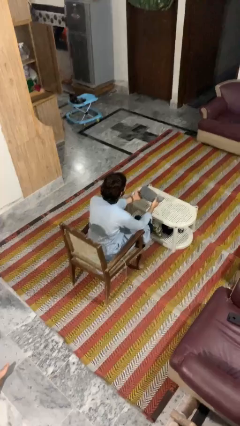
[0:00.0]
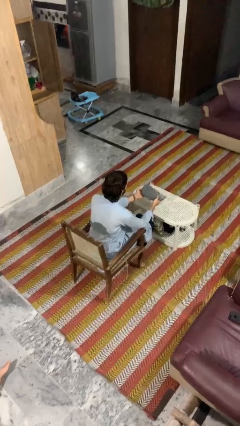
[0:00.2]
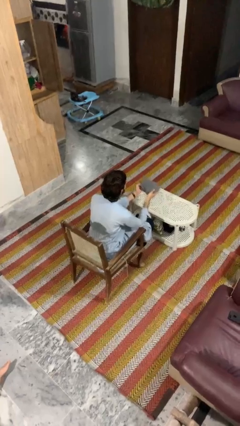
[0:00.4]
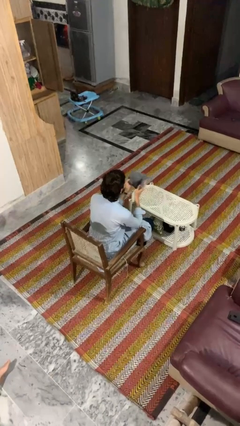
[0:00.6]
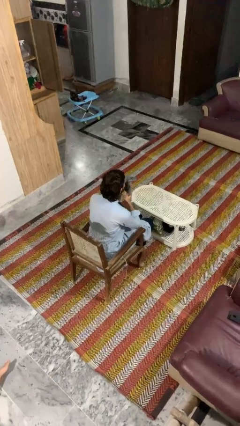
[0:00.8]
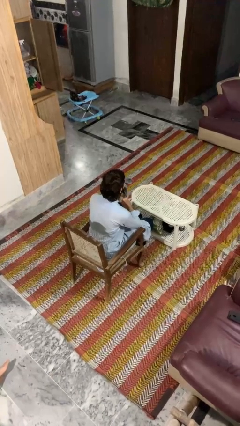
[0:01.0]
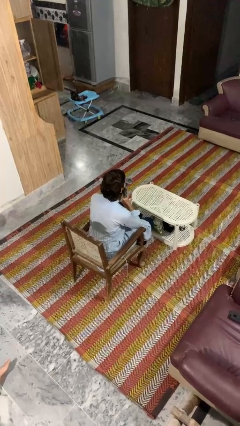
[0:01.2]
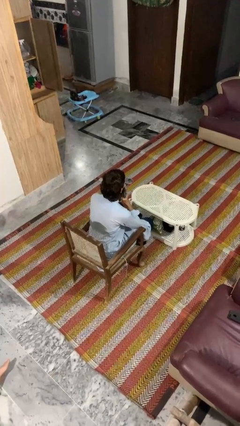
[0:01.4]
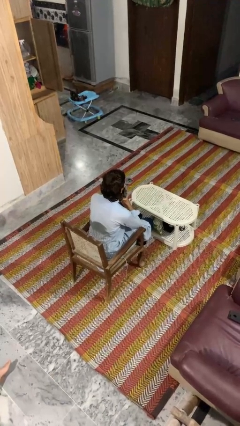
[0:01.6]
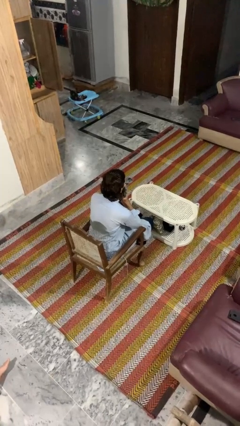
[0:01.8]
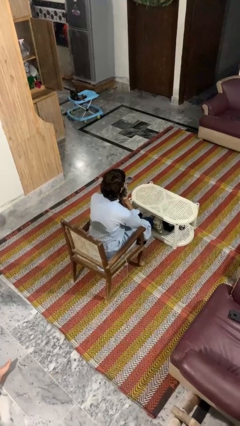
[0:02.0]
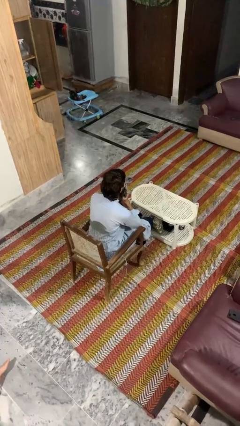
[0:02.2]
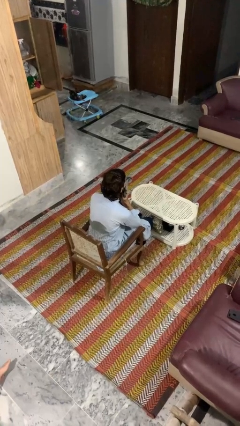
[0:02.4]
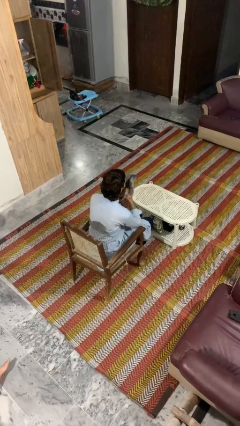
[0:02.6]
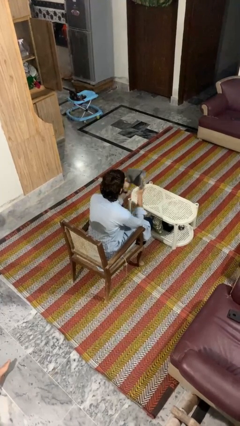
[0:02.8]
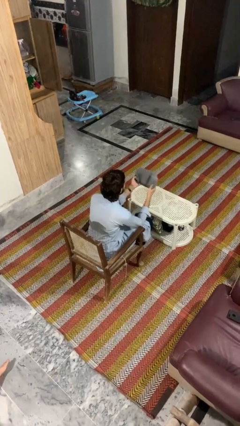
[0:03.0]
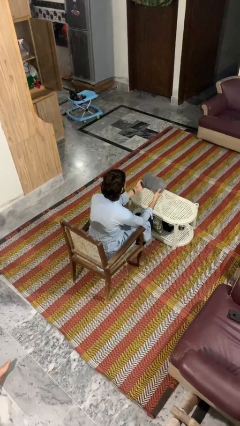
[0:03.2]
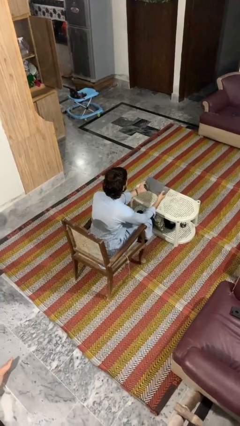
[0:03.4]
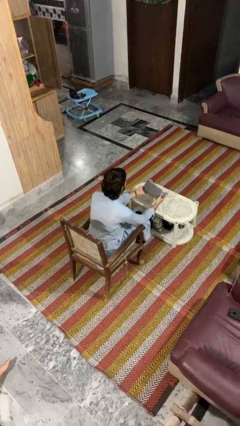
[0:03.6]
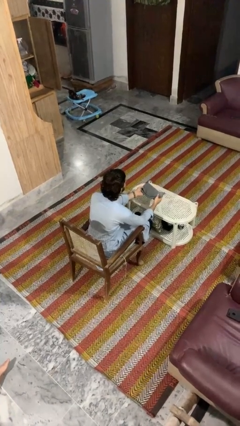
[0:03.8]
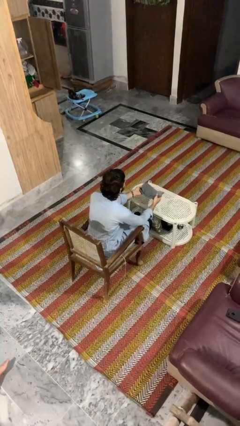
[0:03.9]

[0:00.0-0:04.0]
person wipes mouth with napkin

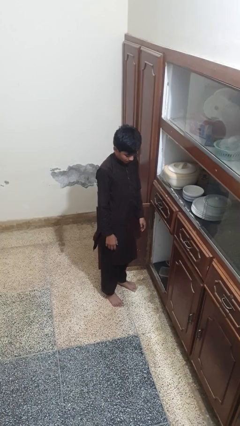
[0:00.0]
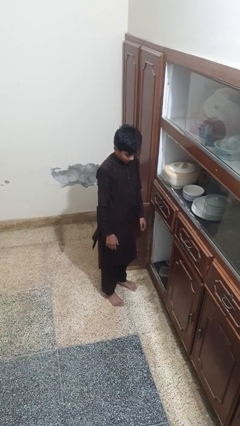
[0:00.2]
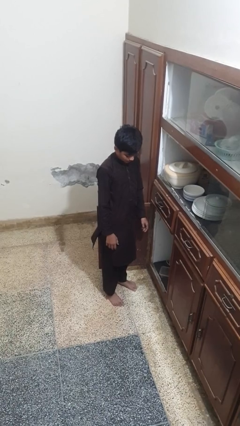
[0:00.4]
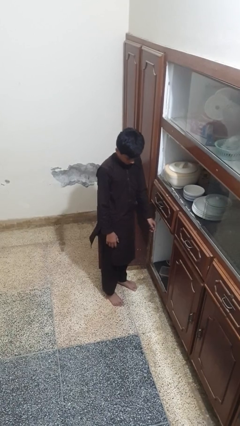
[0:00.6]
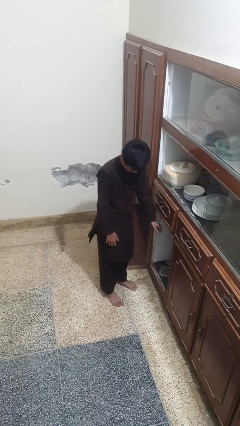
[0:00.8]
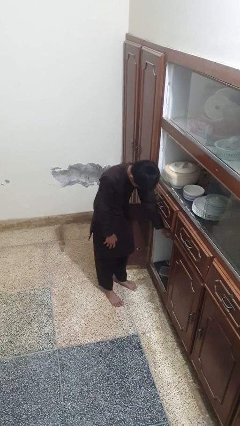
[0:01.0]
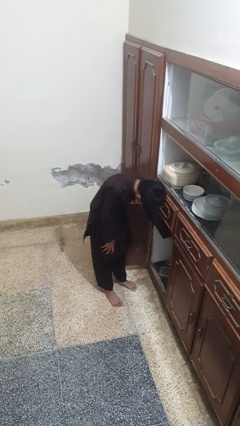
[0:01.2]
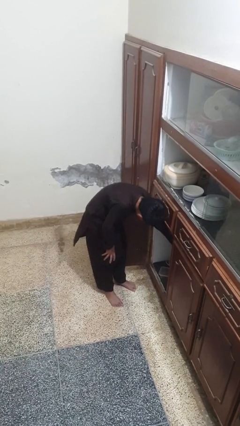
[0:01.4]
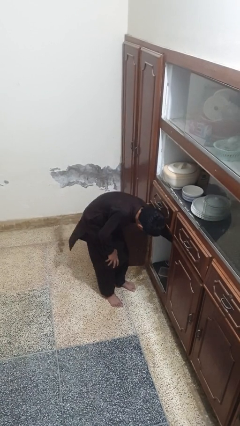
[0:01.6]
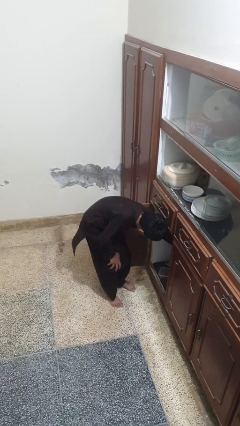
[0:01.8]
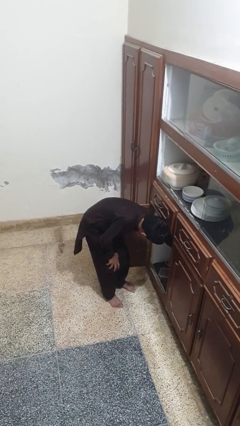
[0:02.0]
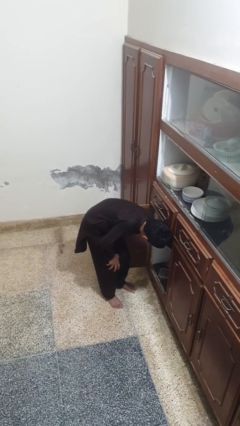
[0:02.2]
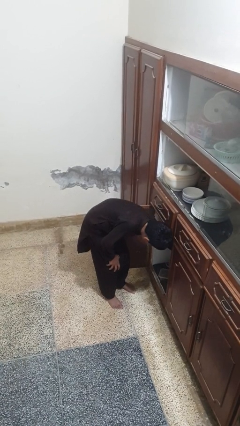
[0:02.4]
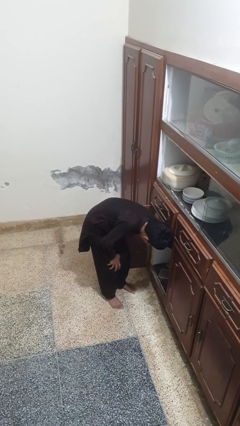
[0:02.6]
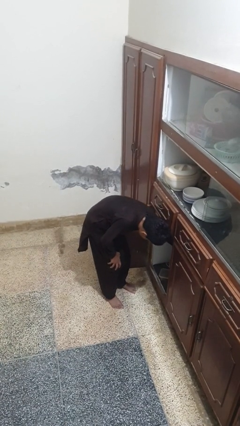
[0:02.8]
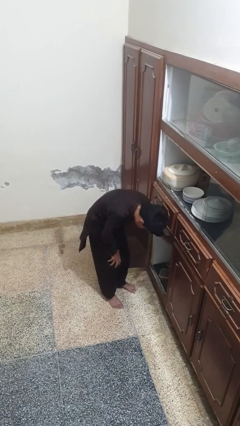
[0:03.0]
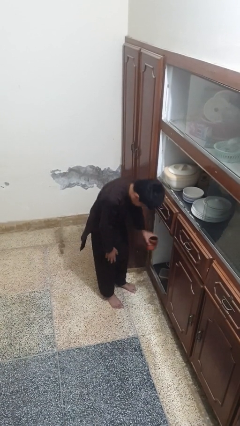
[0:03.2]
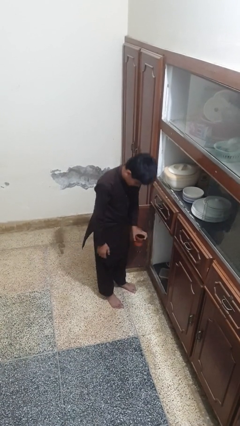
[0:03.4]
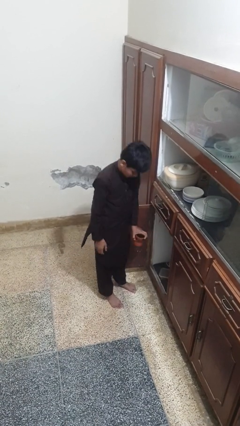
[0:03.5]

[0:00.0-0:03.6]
person takes object from cabinet

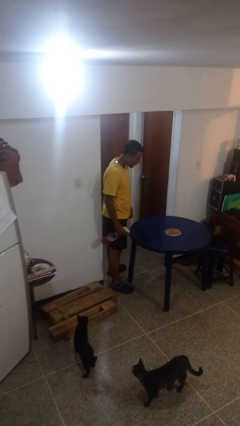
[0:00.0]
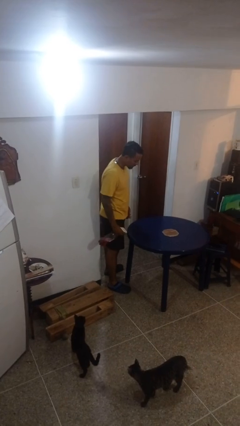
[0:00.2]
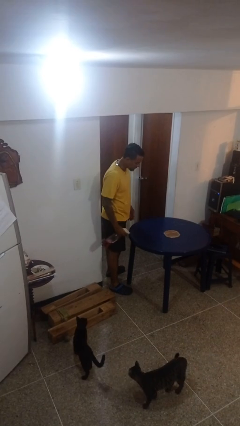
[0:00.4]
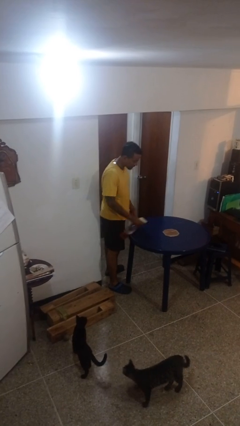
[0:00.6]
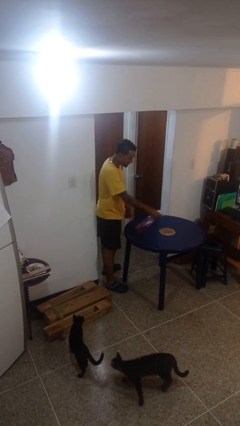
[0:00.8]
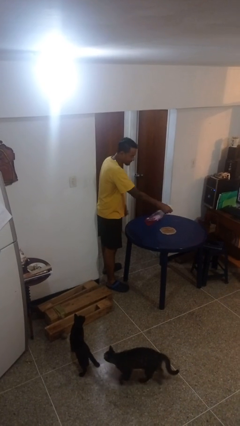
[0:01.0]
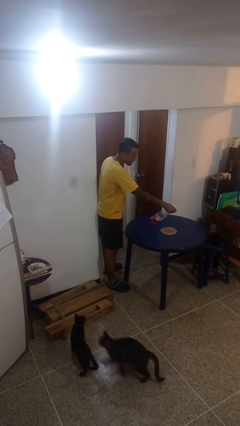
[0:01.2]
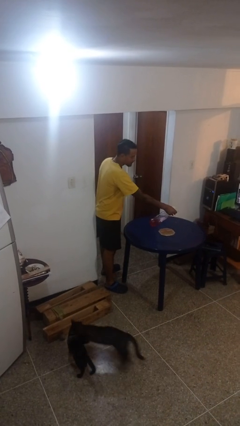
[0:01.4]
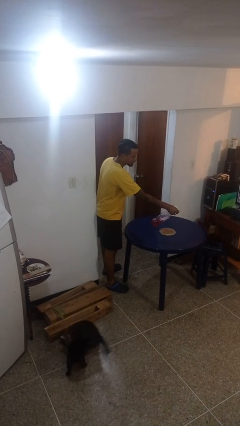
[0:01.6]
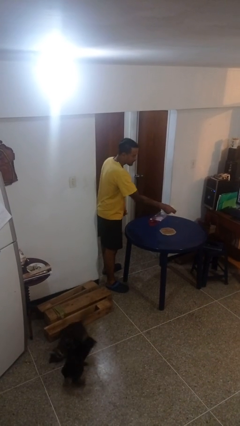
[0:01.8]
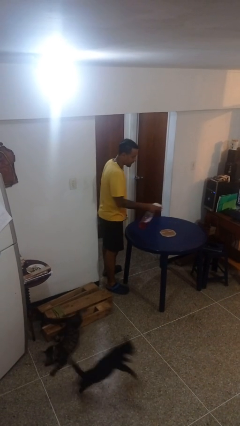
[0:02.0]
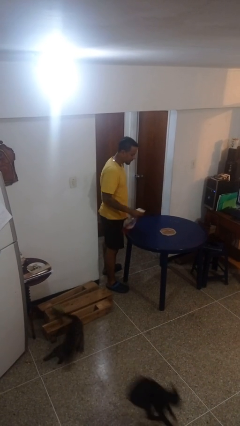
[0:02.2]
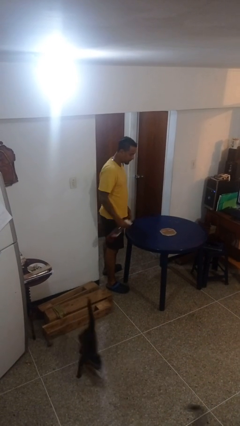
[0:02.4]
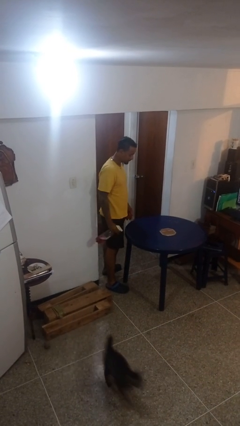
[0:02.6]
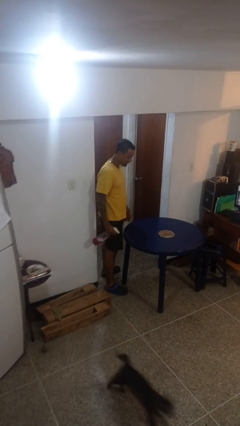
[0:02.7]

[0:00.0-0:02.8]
person sprays from bottle

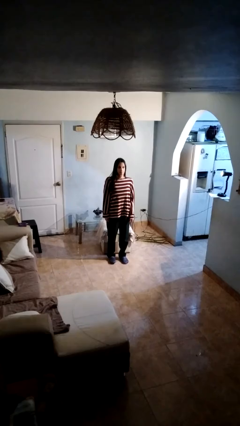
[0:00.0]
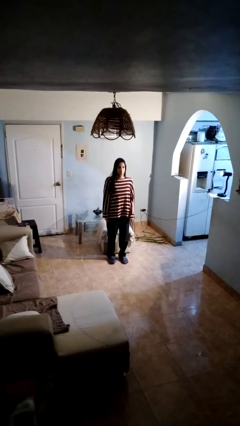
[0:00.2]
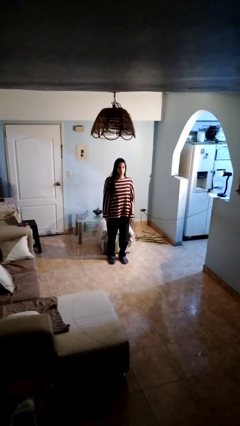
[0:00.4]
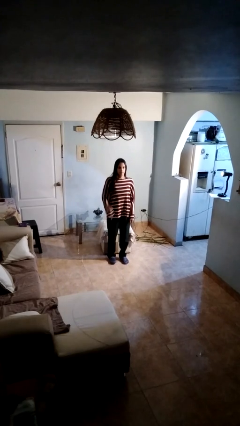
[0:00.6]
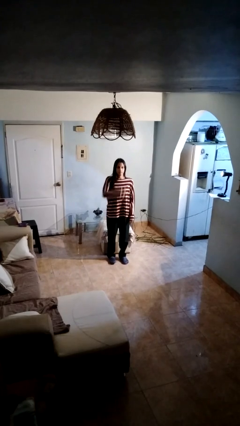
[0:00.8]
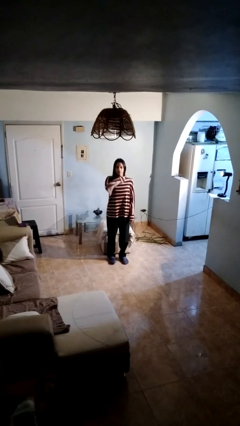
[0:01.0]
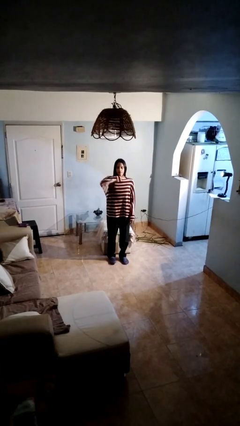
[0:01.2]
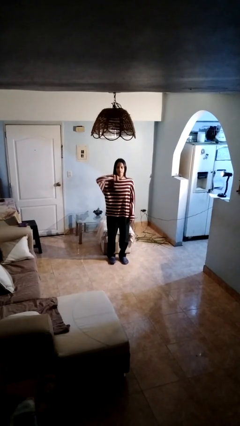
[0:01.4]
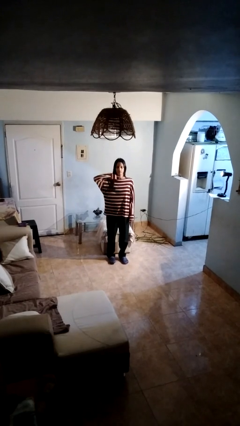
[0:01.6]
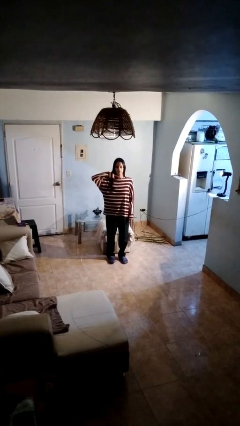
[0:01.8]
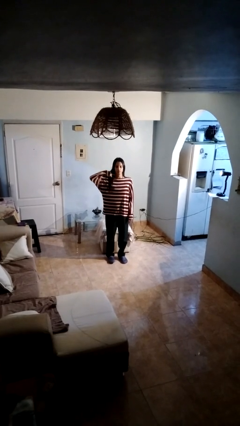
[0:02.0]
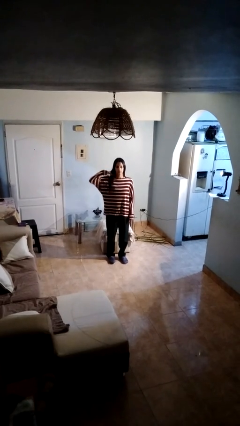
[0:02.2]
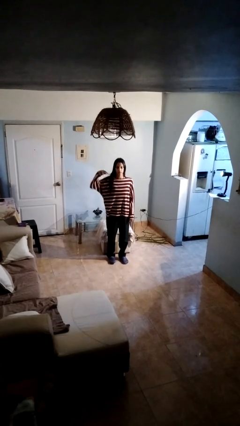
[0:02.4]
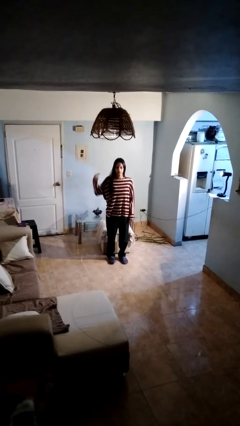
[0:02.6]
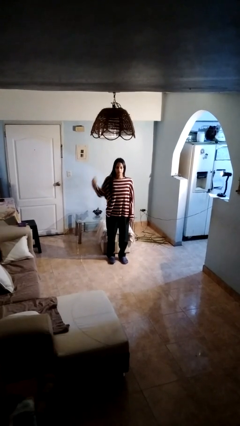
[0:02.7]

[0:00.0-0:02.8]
person gestures cut

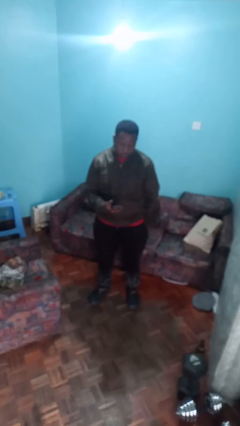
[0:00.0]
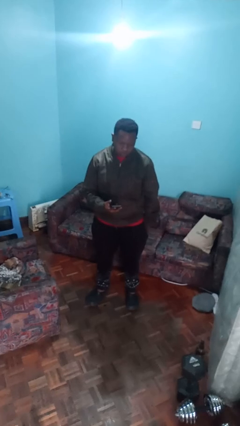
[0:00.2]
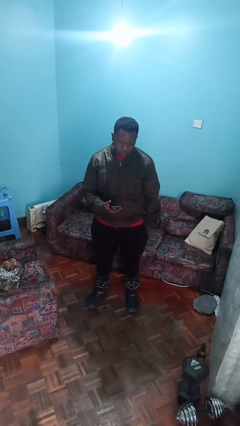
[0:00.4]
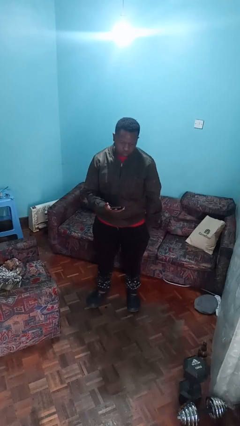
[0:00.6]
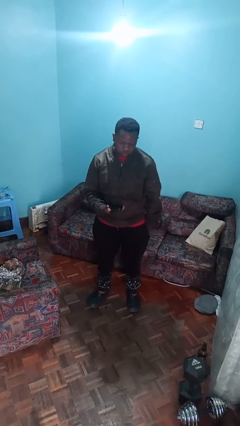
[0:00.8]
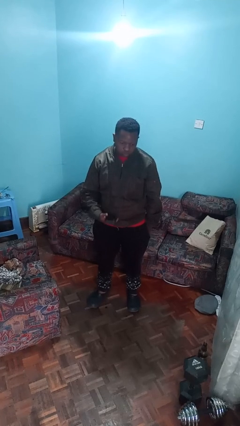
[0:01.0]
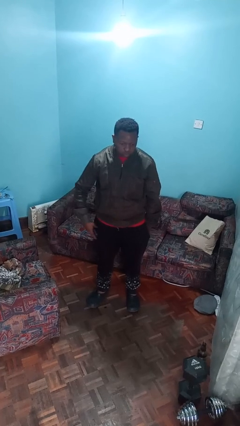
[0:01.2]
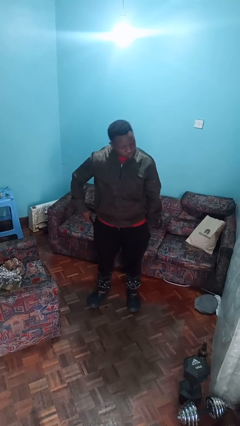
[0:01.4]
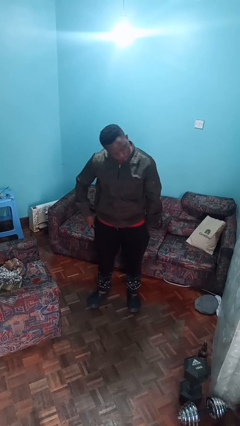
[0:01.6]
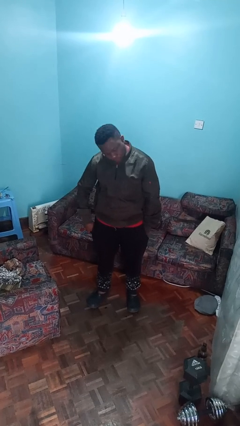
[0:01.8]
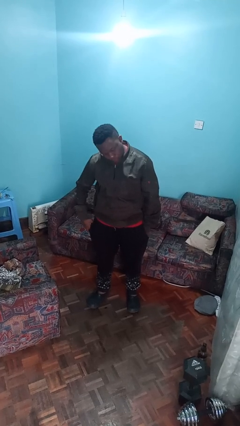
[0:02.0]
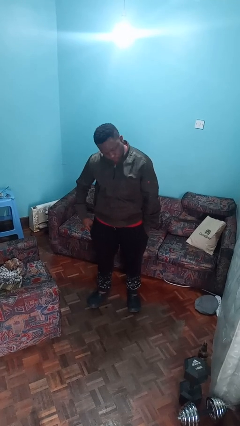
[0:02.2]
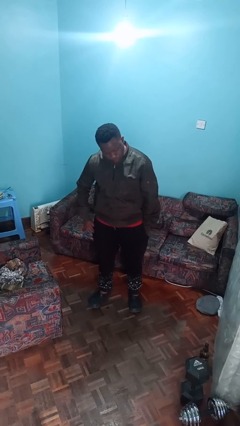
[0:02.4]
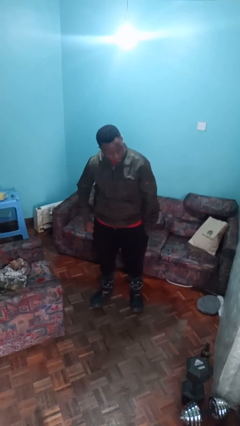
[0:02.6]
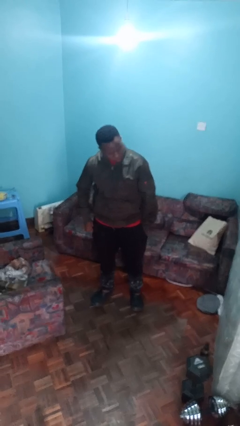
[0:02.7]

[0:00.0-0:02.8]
person puts phone into pocket

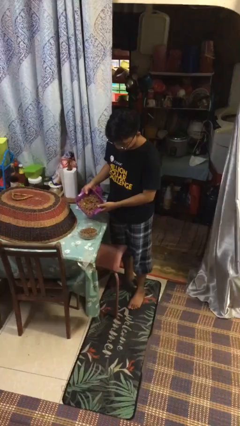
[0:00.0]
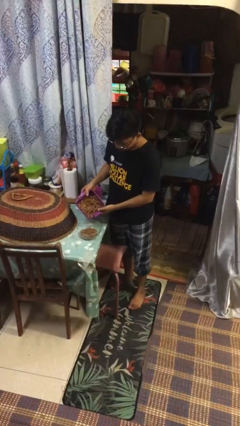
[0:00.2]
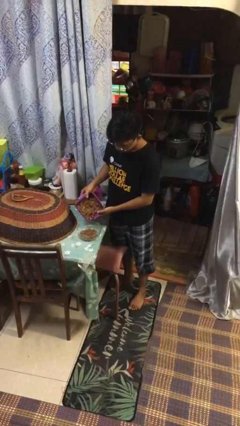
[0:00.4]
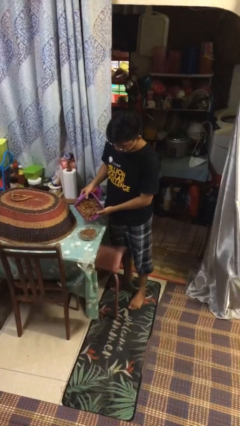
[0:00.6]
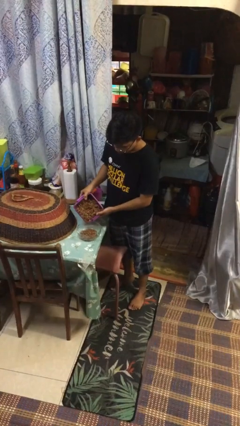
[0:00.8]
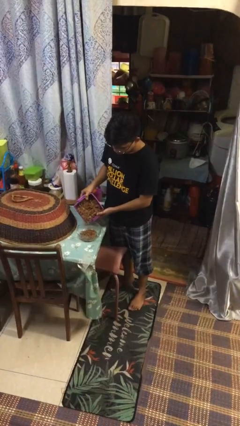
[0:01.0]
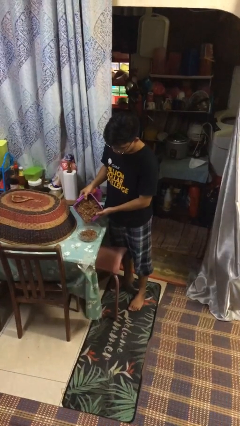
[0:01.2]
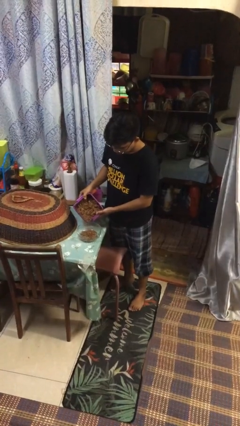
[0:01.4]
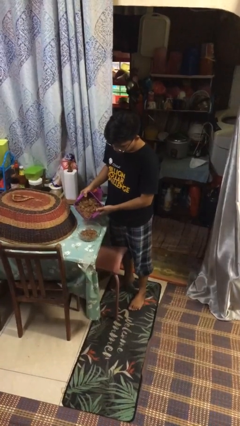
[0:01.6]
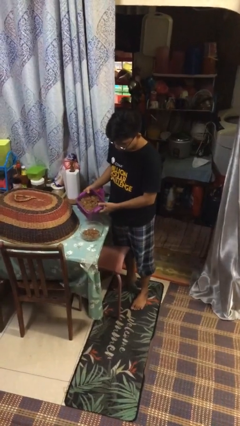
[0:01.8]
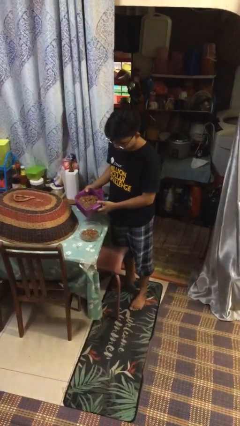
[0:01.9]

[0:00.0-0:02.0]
person pours into bowl
